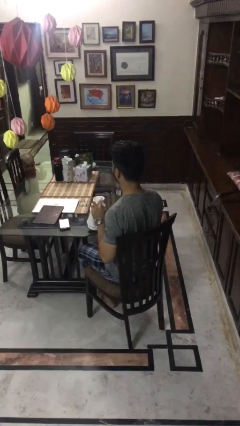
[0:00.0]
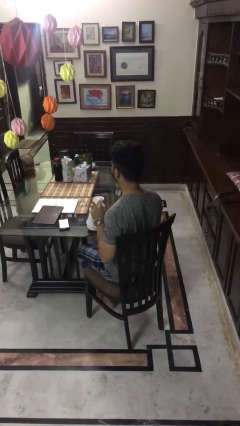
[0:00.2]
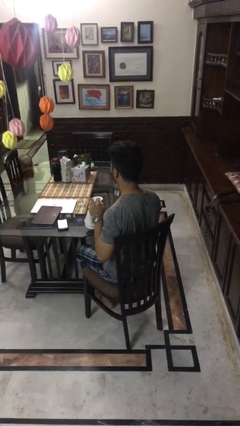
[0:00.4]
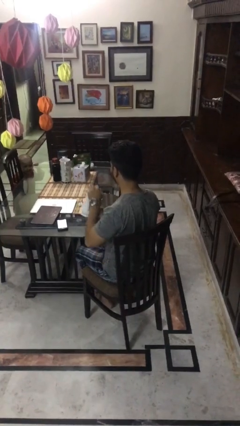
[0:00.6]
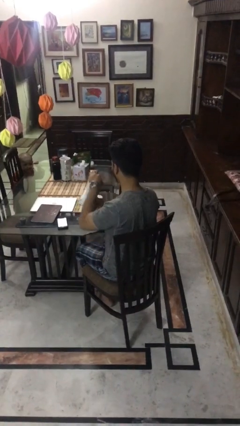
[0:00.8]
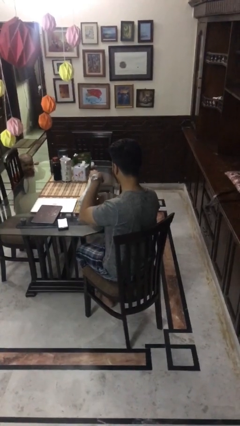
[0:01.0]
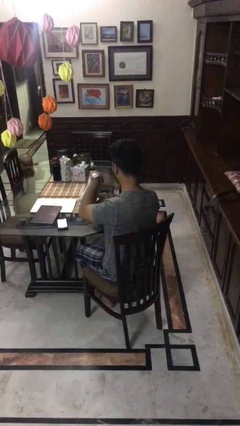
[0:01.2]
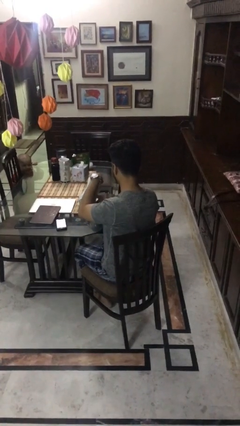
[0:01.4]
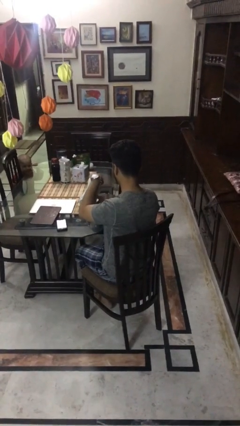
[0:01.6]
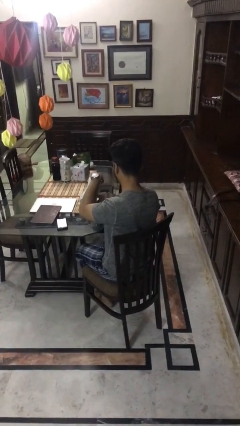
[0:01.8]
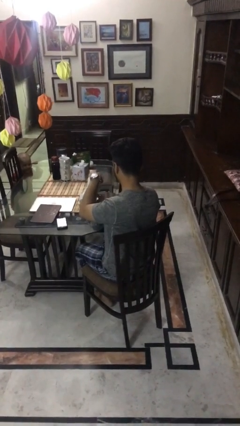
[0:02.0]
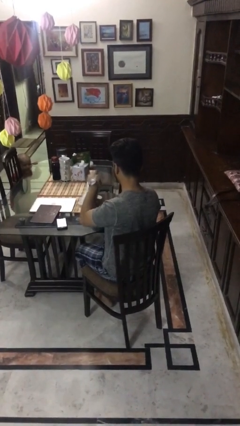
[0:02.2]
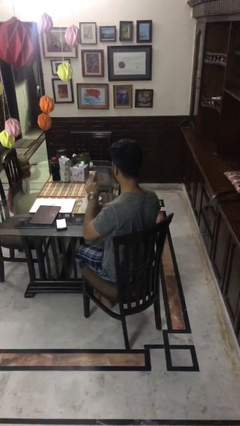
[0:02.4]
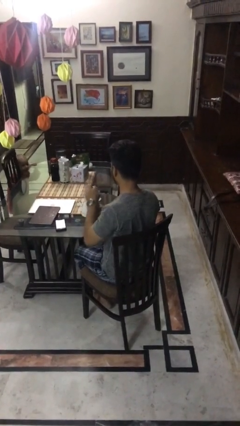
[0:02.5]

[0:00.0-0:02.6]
person pours coffee into mug

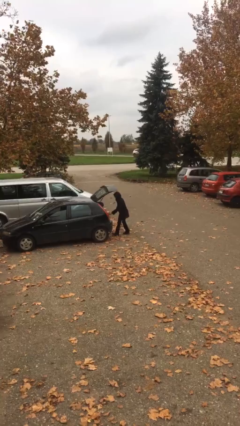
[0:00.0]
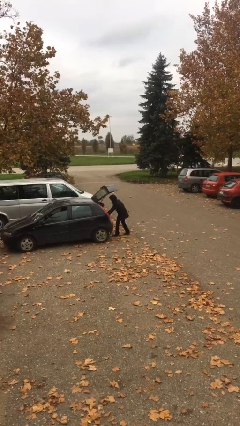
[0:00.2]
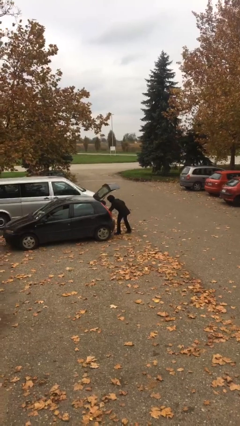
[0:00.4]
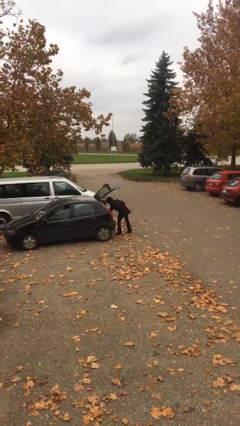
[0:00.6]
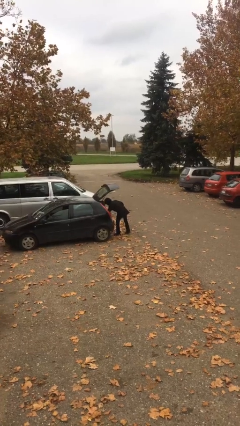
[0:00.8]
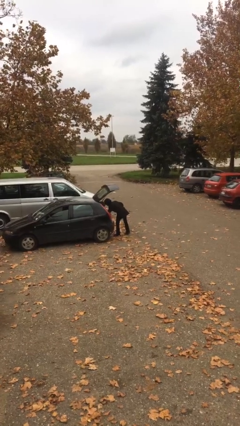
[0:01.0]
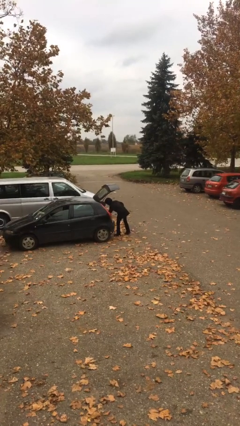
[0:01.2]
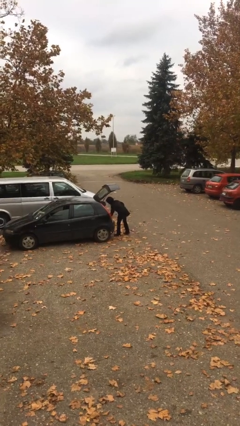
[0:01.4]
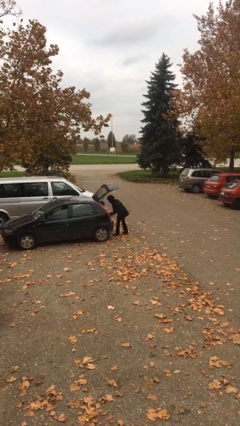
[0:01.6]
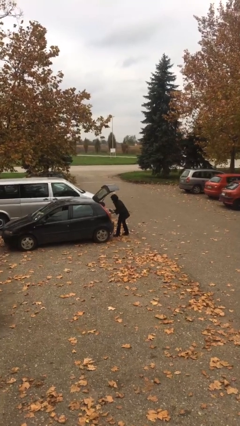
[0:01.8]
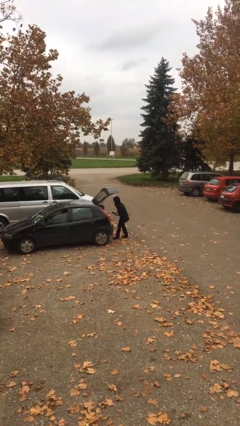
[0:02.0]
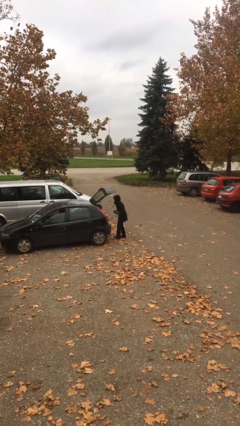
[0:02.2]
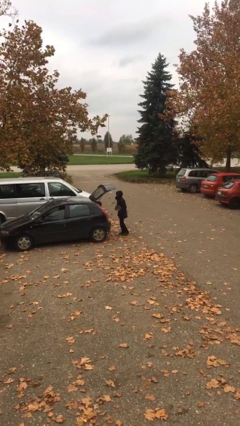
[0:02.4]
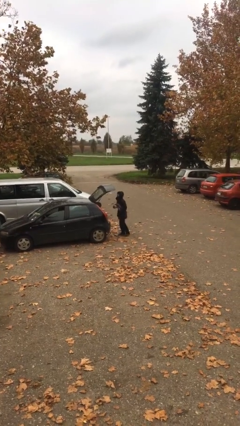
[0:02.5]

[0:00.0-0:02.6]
person unloads car

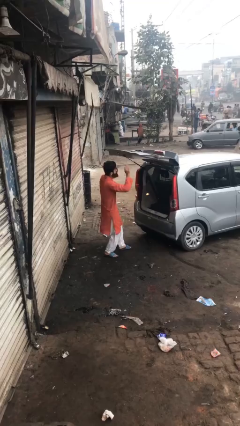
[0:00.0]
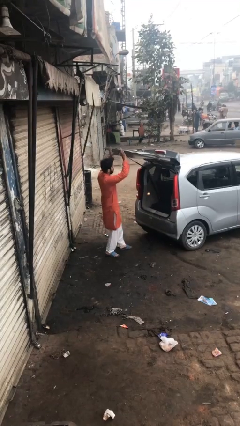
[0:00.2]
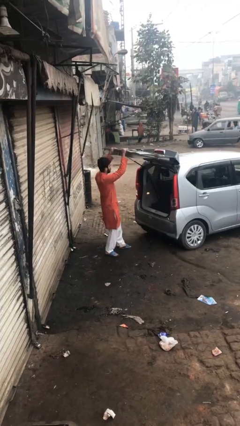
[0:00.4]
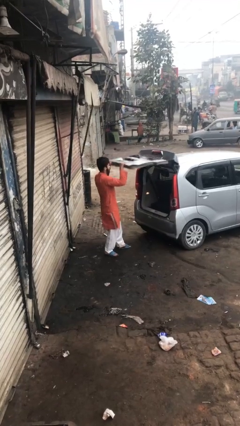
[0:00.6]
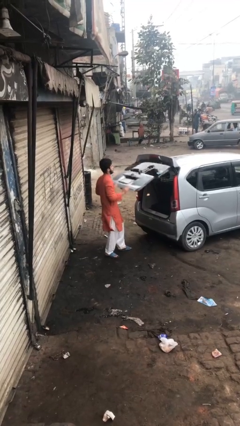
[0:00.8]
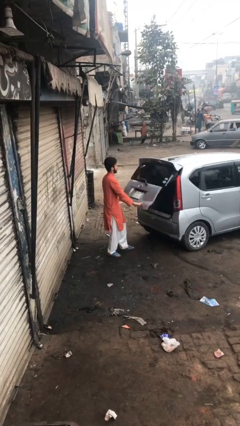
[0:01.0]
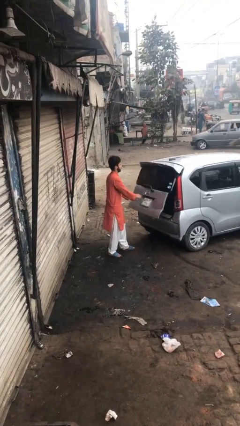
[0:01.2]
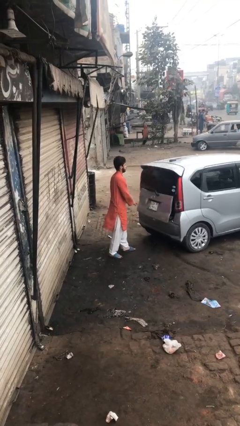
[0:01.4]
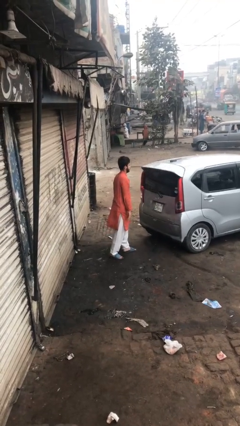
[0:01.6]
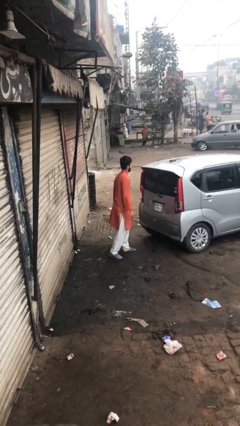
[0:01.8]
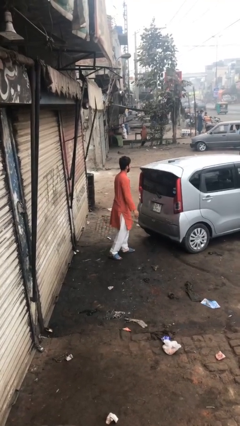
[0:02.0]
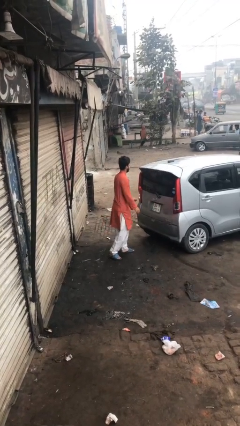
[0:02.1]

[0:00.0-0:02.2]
person closes car trunk

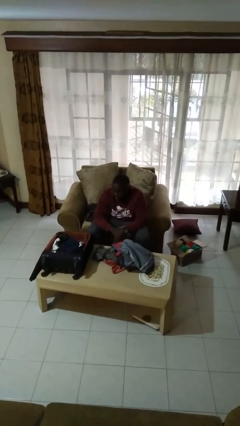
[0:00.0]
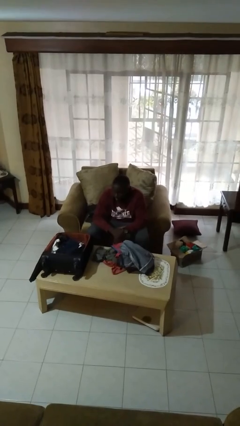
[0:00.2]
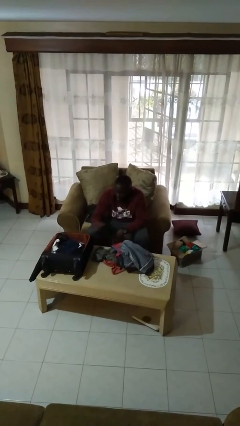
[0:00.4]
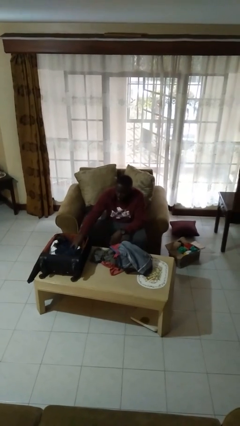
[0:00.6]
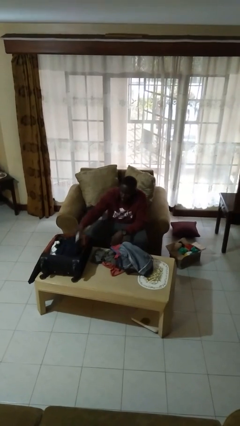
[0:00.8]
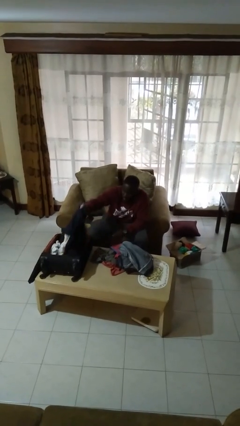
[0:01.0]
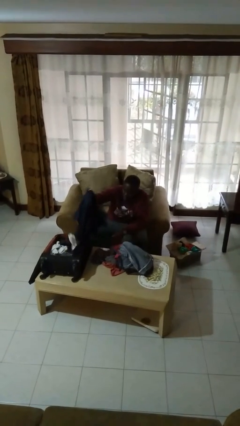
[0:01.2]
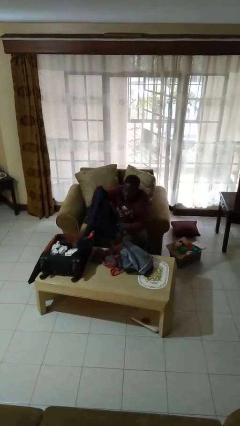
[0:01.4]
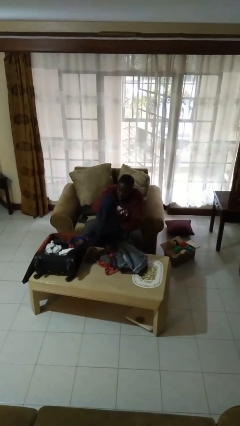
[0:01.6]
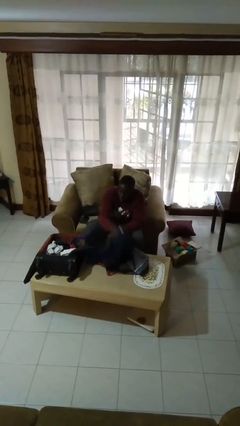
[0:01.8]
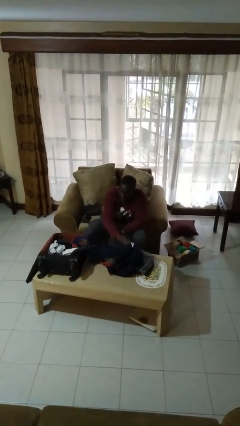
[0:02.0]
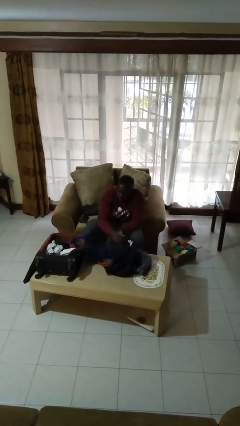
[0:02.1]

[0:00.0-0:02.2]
person unloads clothes from suitcase

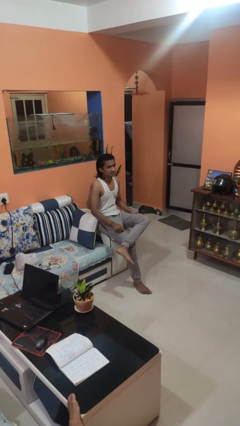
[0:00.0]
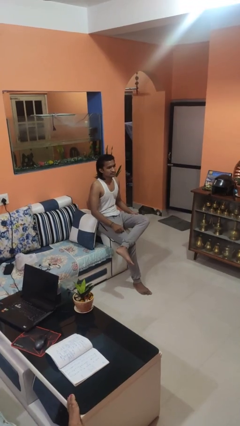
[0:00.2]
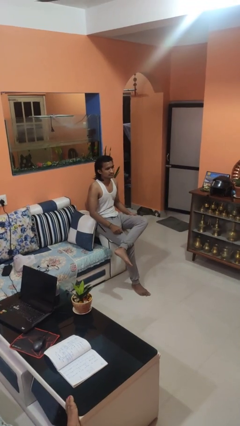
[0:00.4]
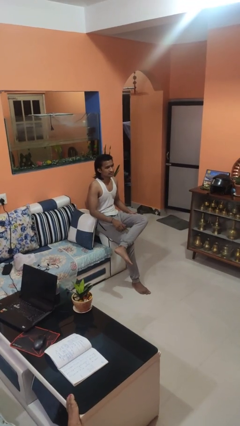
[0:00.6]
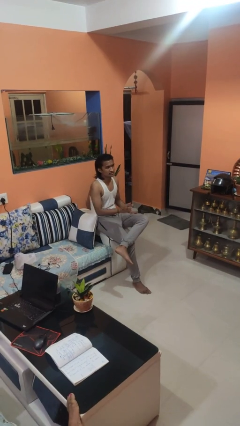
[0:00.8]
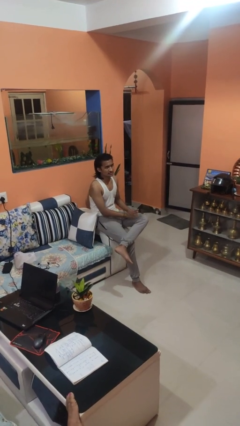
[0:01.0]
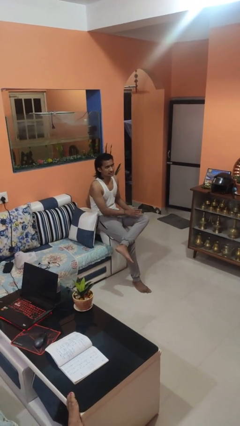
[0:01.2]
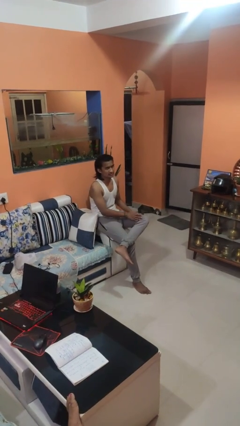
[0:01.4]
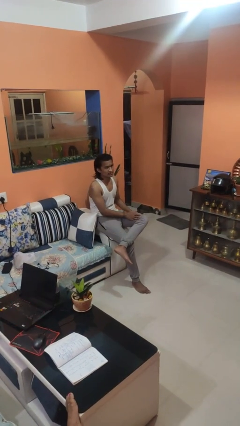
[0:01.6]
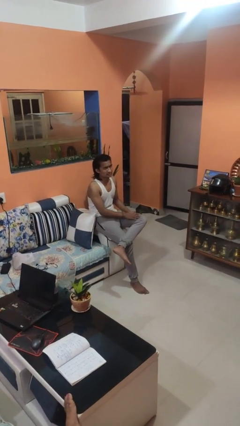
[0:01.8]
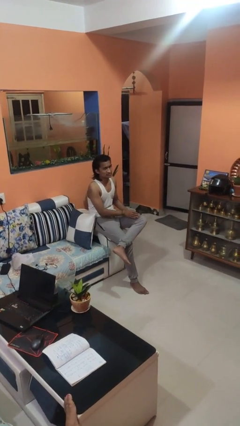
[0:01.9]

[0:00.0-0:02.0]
person slaps hands on thighs

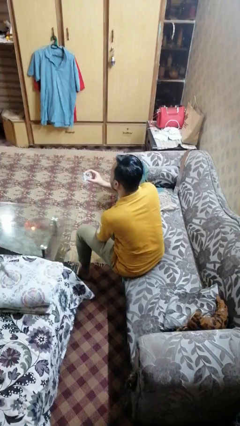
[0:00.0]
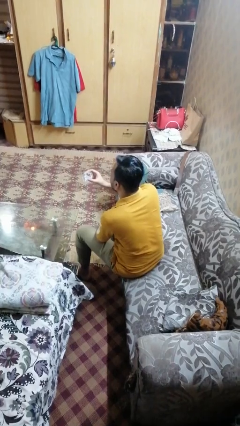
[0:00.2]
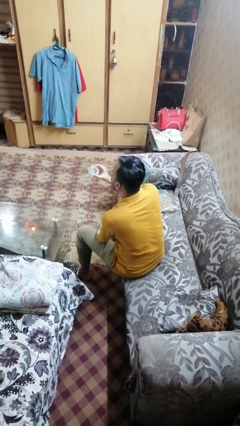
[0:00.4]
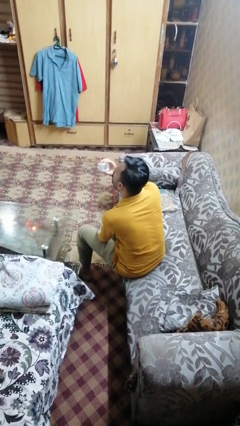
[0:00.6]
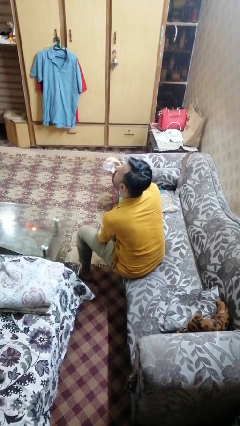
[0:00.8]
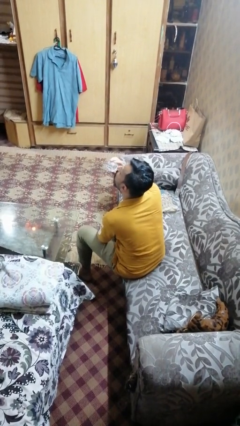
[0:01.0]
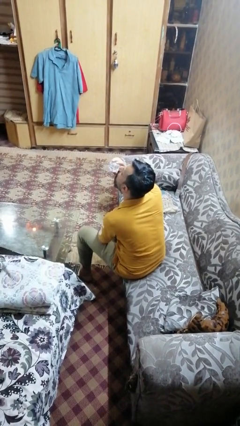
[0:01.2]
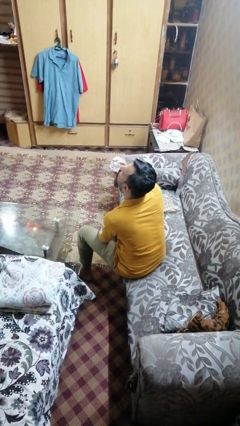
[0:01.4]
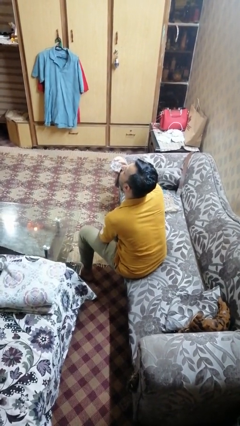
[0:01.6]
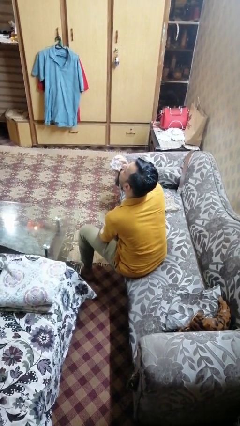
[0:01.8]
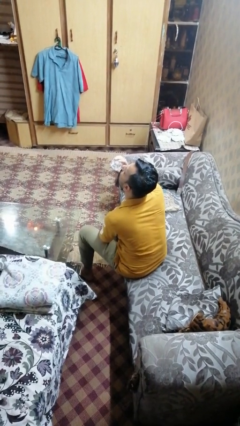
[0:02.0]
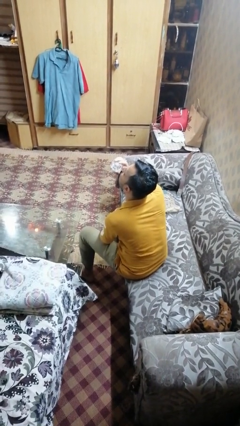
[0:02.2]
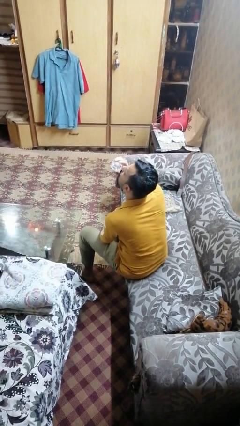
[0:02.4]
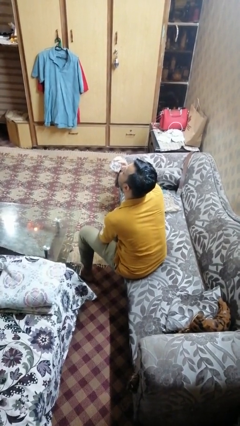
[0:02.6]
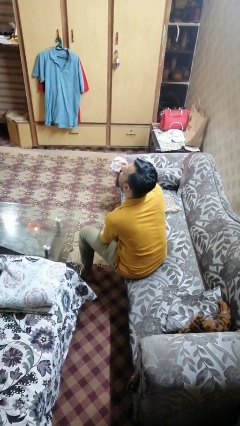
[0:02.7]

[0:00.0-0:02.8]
person drinks from shotglass

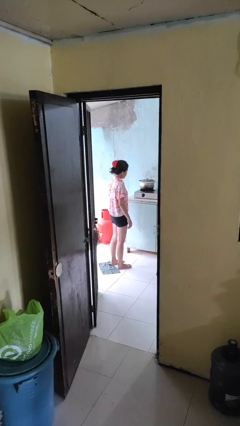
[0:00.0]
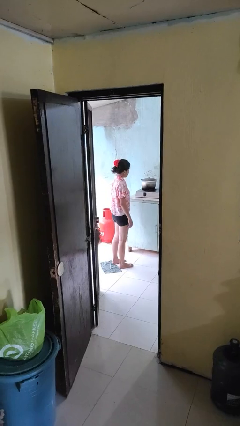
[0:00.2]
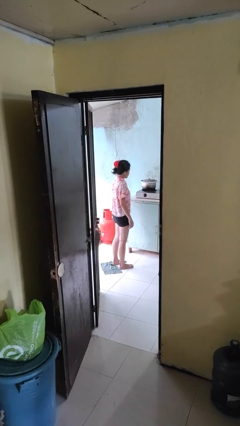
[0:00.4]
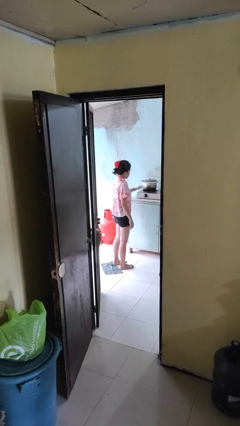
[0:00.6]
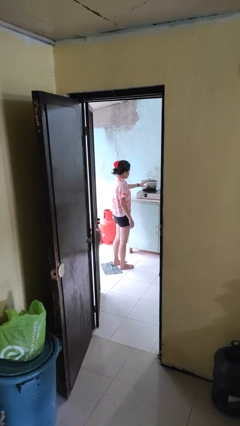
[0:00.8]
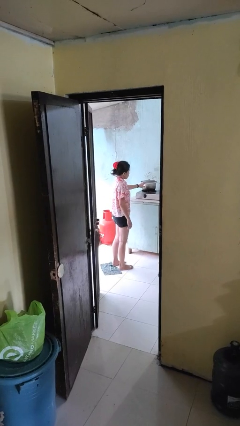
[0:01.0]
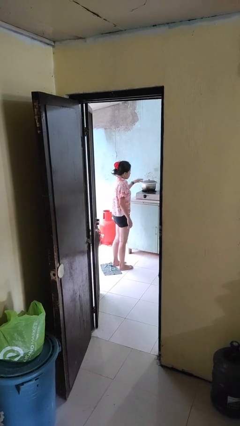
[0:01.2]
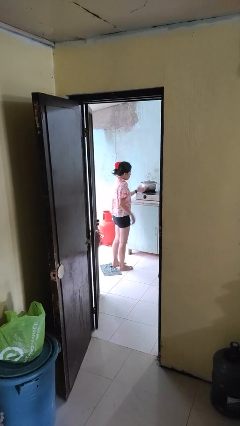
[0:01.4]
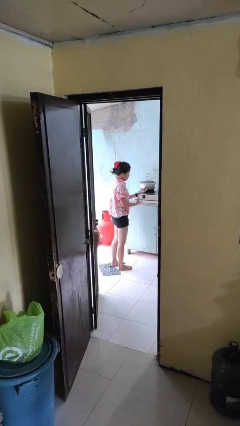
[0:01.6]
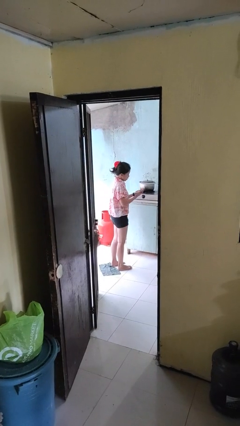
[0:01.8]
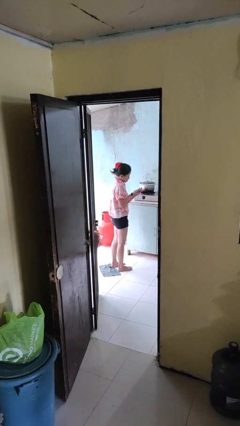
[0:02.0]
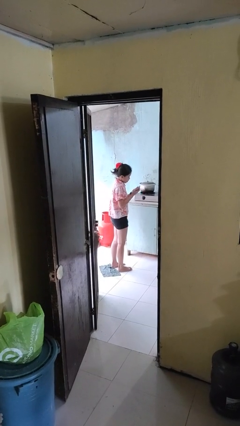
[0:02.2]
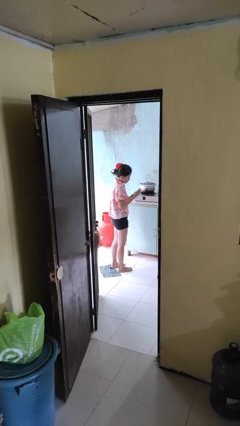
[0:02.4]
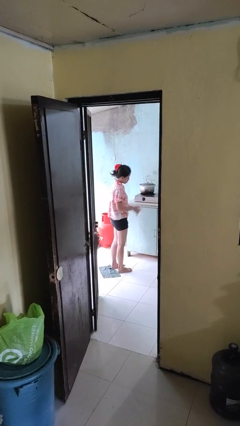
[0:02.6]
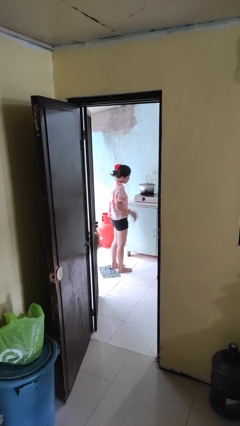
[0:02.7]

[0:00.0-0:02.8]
person burns hand
